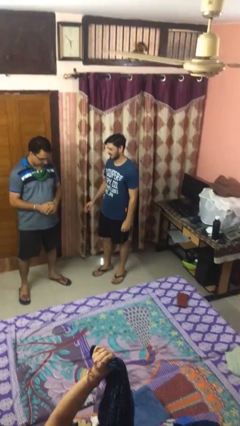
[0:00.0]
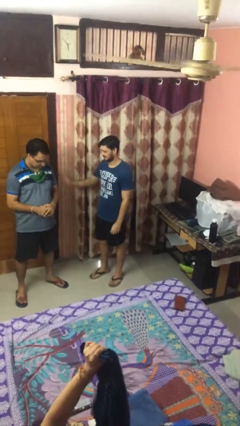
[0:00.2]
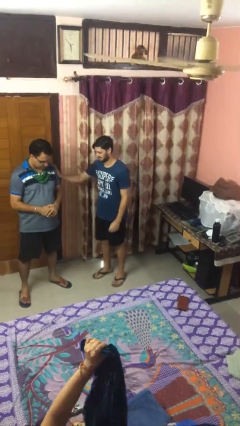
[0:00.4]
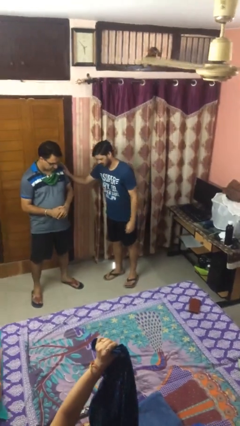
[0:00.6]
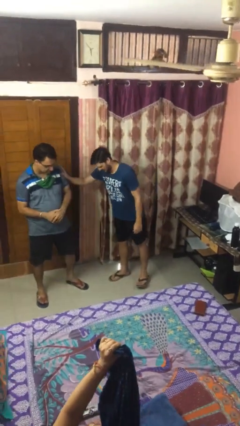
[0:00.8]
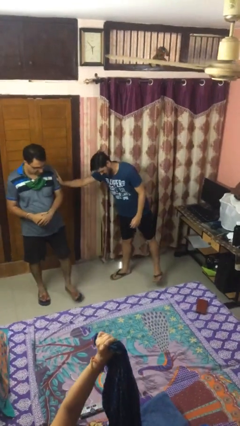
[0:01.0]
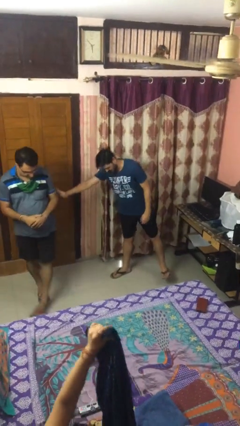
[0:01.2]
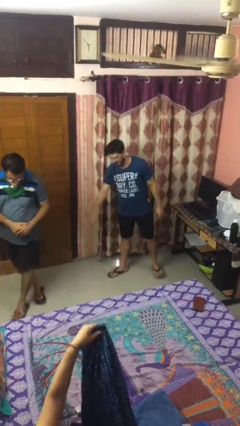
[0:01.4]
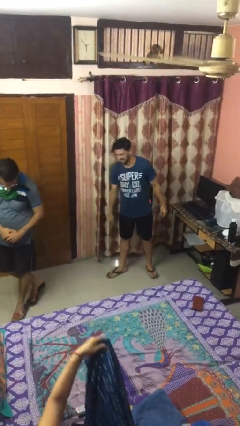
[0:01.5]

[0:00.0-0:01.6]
person shoves person

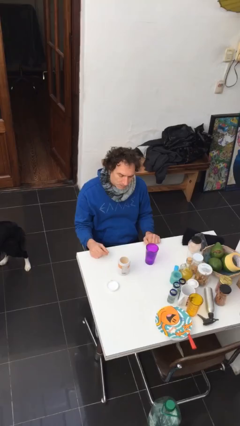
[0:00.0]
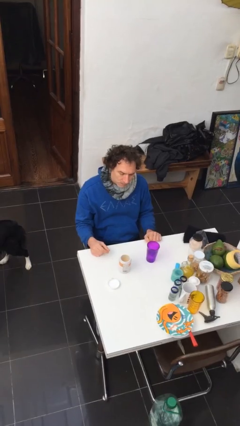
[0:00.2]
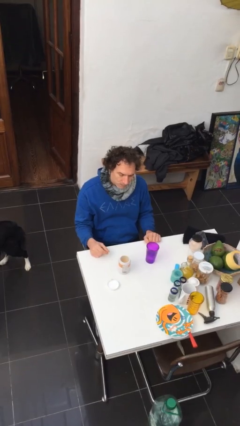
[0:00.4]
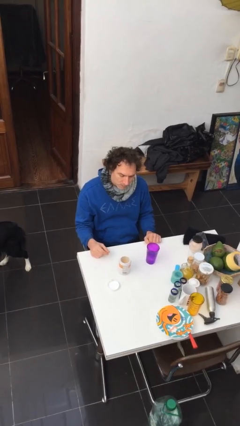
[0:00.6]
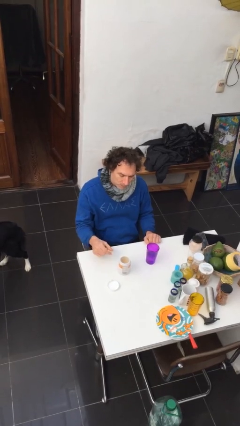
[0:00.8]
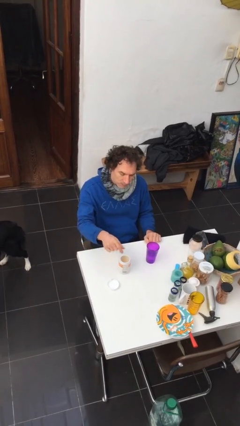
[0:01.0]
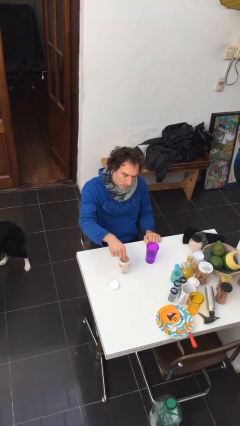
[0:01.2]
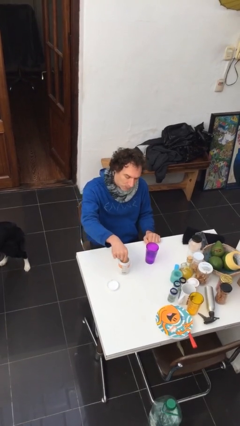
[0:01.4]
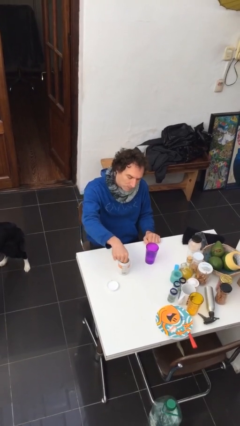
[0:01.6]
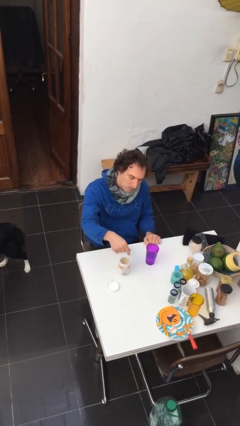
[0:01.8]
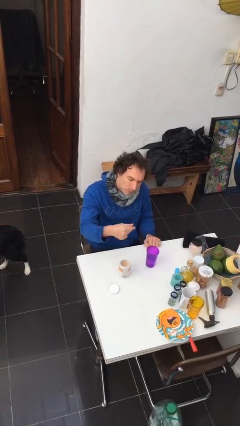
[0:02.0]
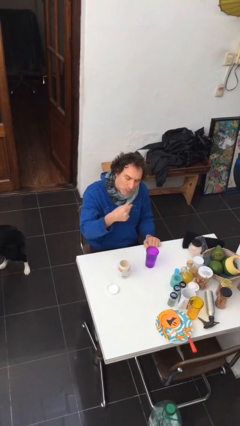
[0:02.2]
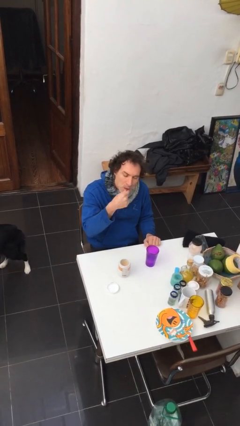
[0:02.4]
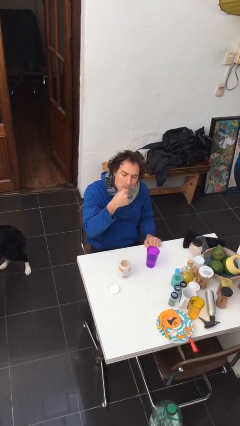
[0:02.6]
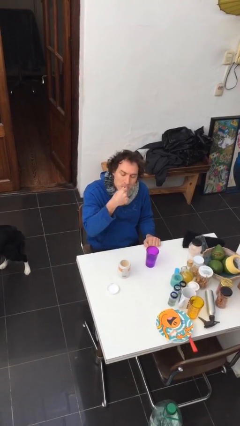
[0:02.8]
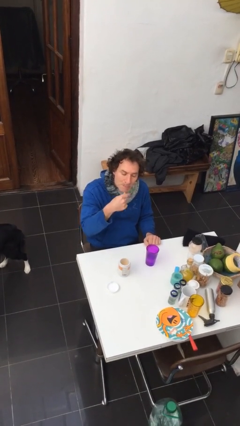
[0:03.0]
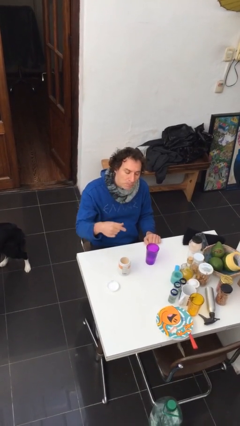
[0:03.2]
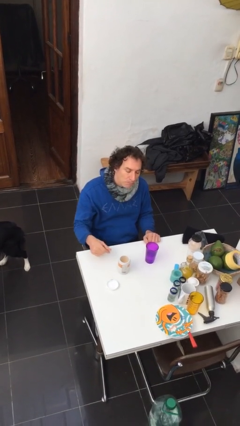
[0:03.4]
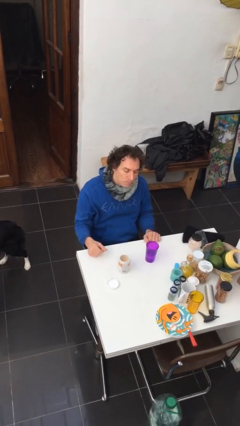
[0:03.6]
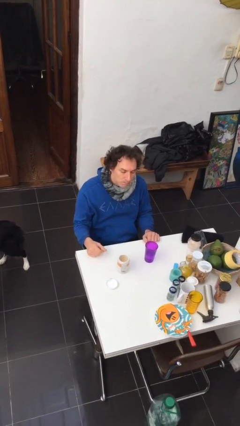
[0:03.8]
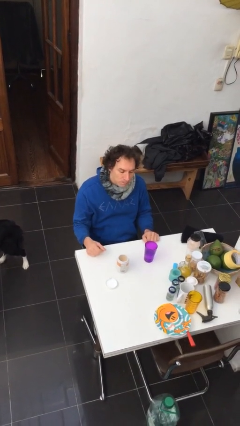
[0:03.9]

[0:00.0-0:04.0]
person takes medicine pills

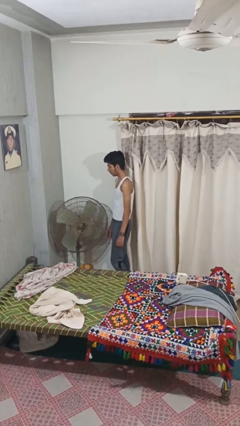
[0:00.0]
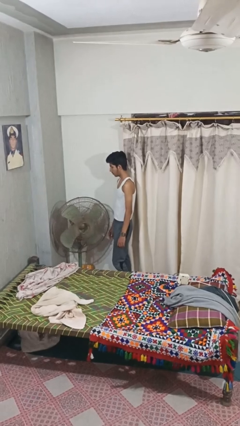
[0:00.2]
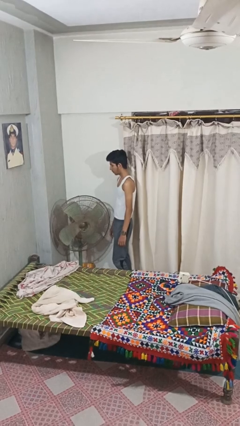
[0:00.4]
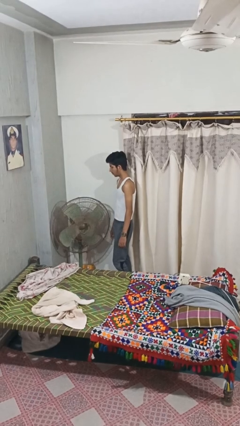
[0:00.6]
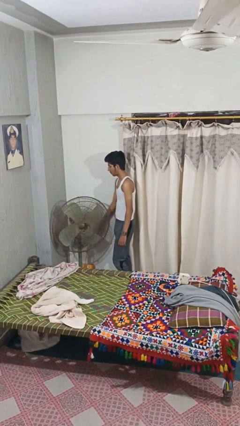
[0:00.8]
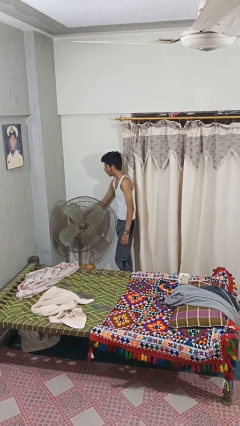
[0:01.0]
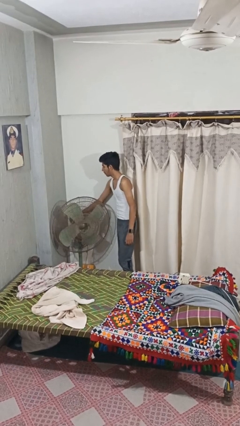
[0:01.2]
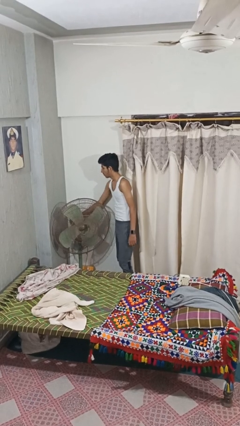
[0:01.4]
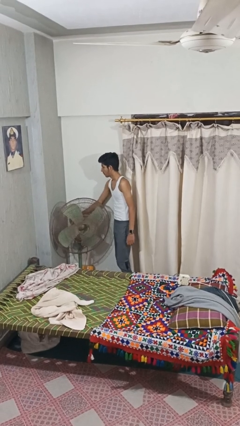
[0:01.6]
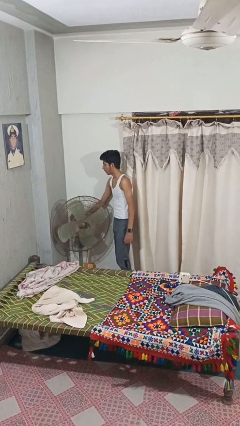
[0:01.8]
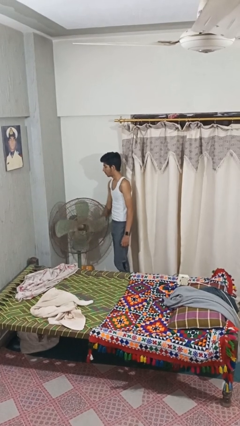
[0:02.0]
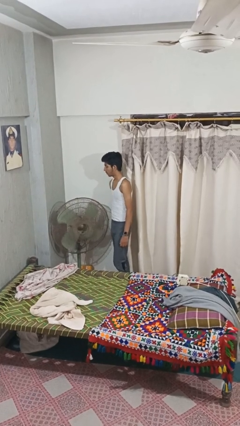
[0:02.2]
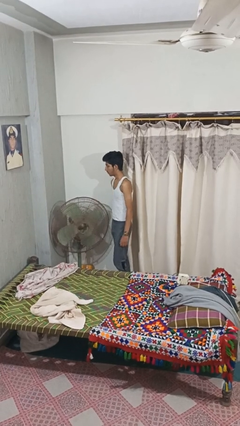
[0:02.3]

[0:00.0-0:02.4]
person turns on fan

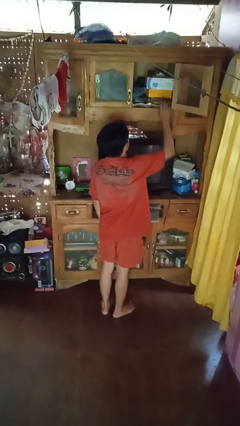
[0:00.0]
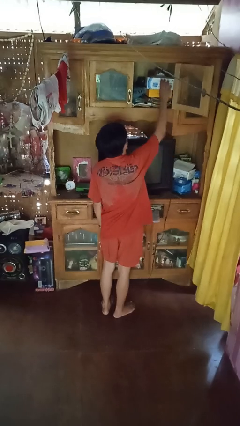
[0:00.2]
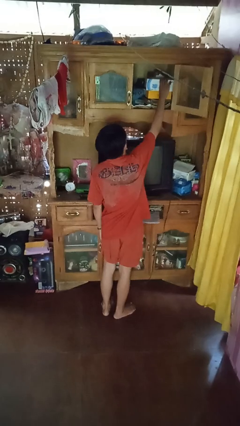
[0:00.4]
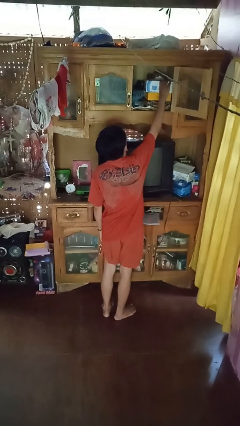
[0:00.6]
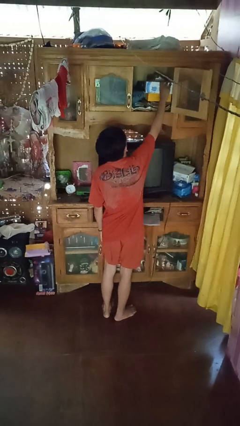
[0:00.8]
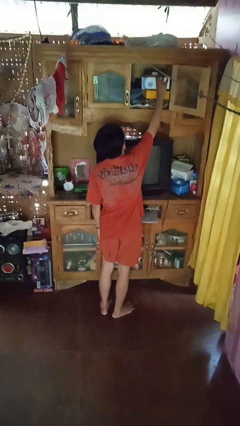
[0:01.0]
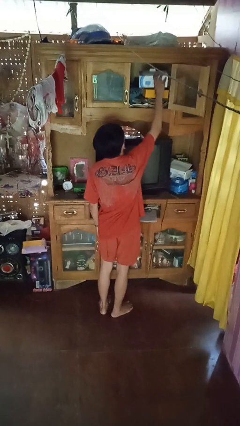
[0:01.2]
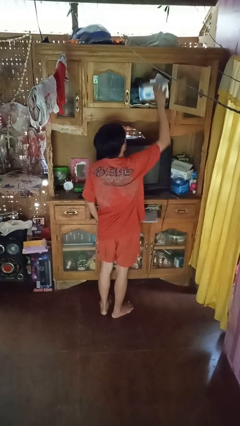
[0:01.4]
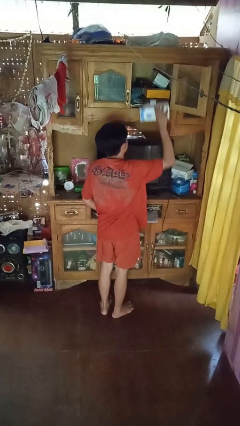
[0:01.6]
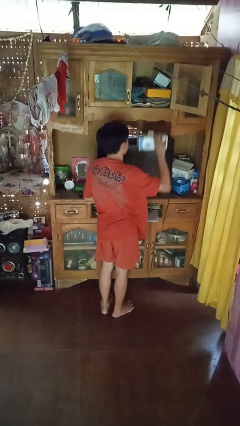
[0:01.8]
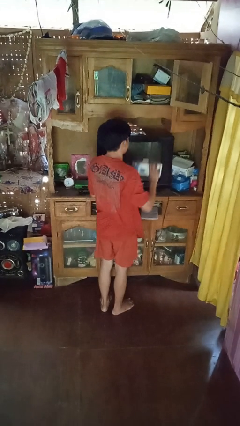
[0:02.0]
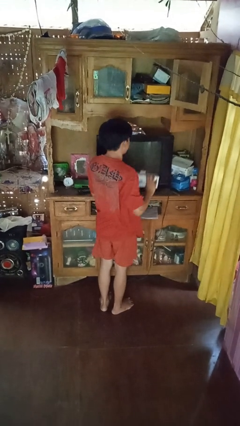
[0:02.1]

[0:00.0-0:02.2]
person picks up object from shelf

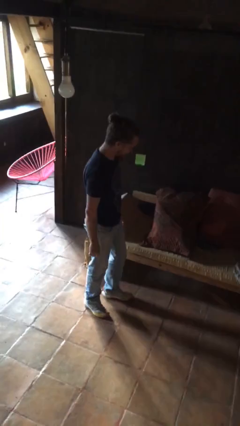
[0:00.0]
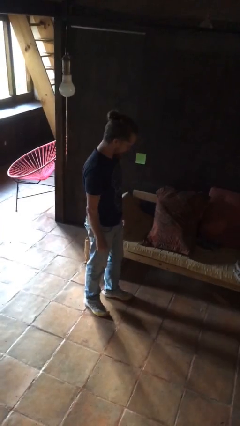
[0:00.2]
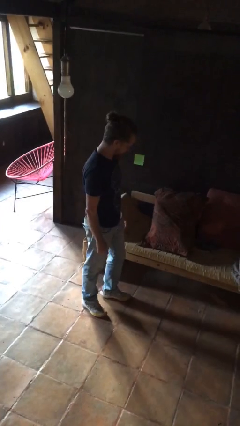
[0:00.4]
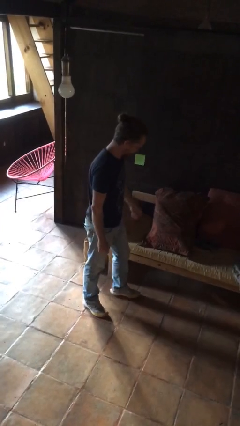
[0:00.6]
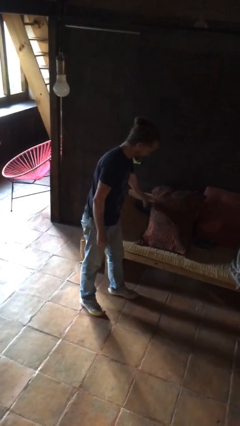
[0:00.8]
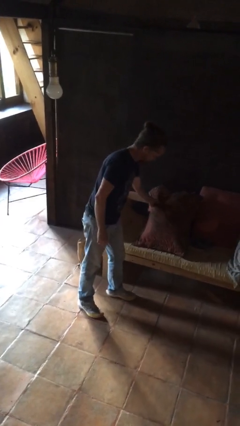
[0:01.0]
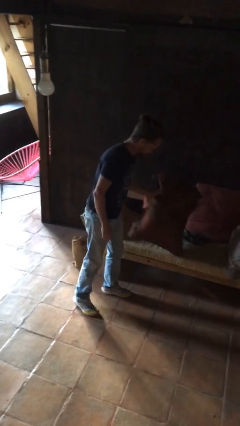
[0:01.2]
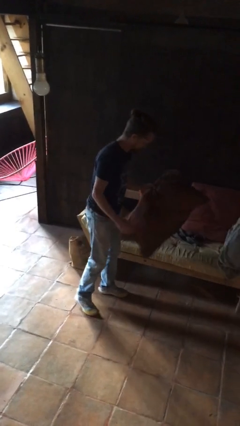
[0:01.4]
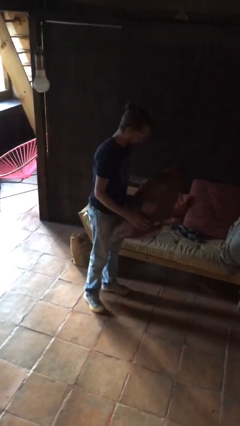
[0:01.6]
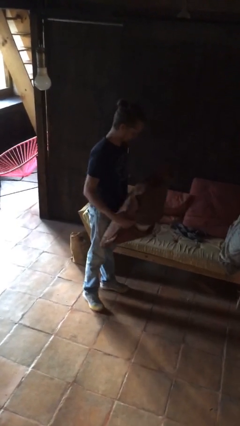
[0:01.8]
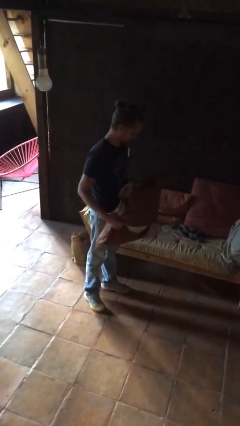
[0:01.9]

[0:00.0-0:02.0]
person picks up object from couch

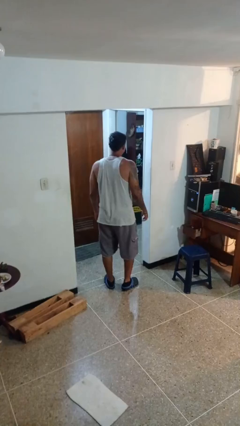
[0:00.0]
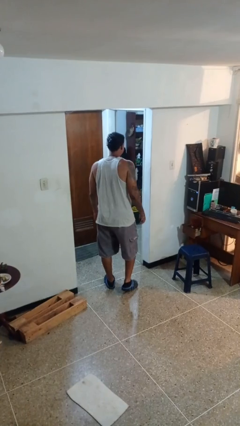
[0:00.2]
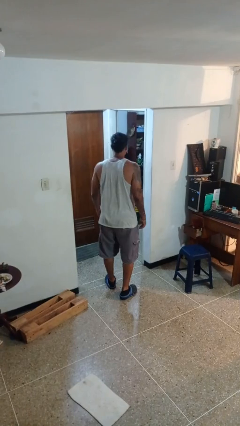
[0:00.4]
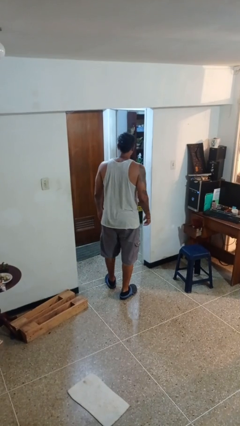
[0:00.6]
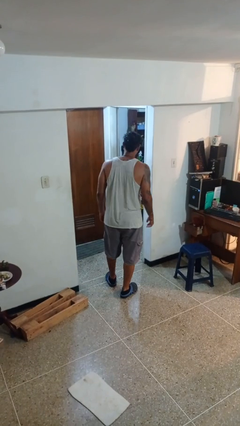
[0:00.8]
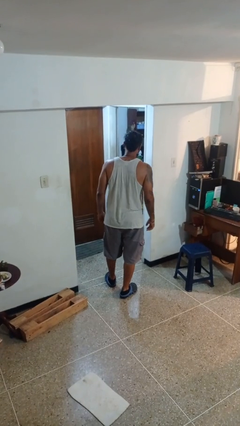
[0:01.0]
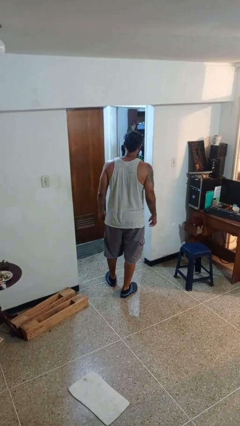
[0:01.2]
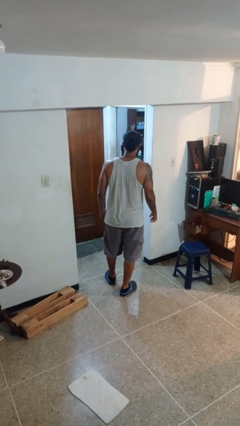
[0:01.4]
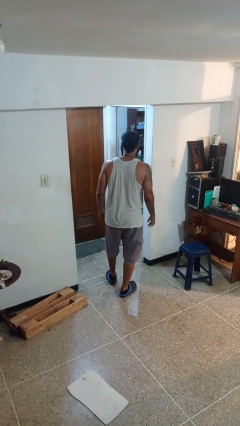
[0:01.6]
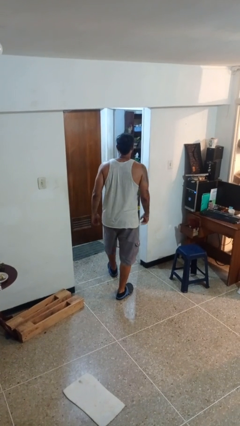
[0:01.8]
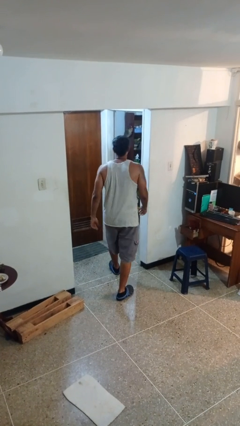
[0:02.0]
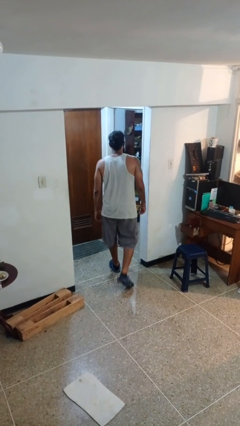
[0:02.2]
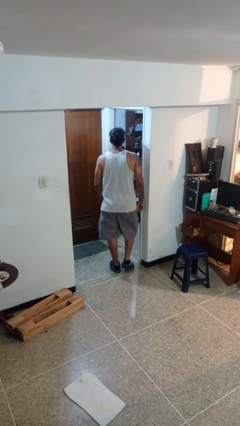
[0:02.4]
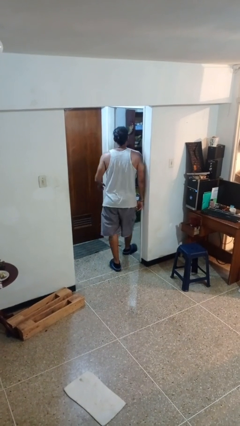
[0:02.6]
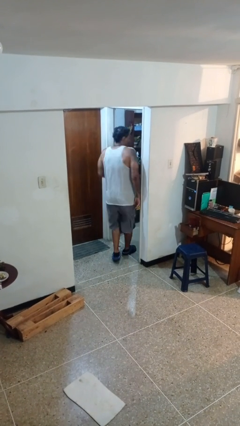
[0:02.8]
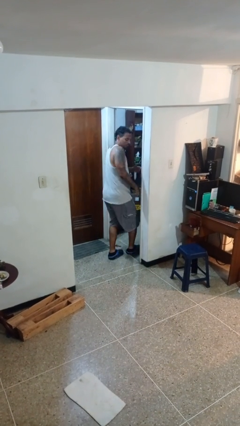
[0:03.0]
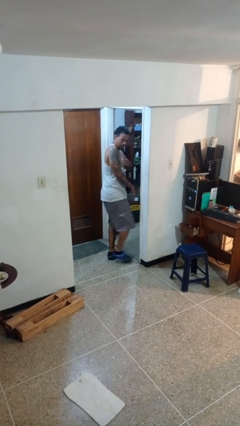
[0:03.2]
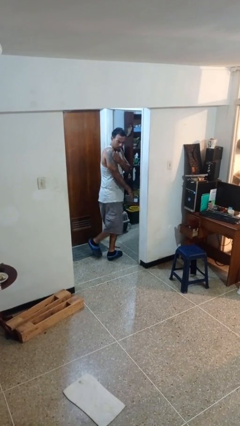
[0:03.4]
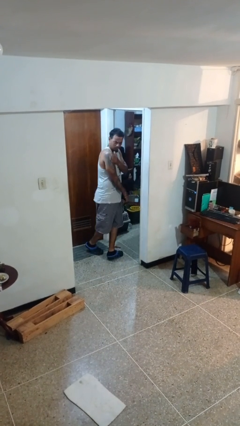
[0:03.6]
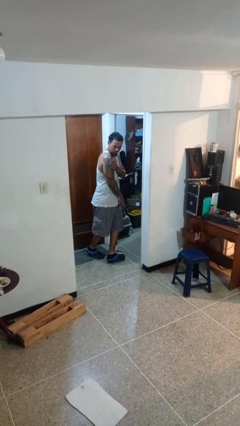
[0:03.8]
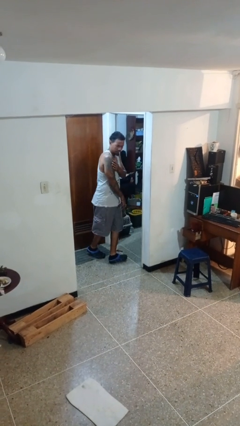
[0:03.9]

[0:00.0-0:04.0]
person bumps into wall

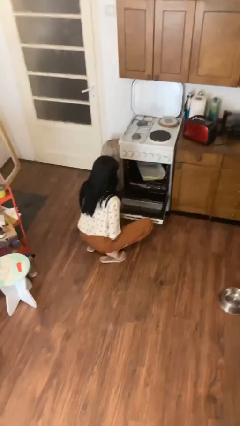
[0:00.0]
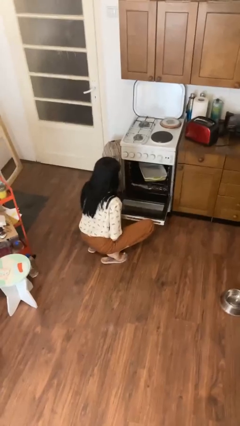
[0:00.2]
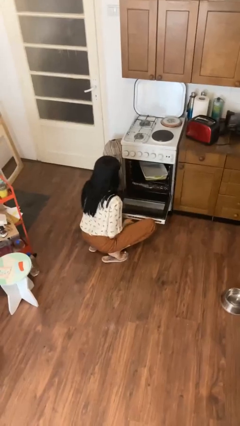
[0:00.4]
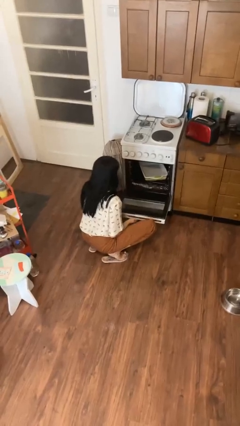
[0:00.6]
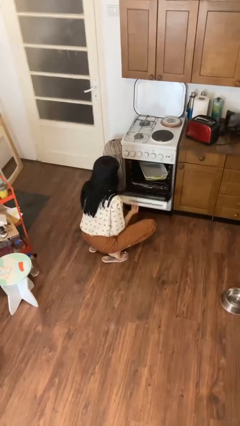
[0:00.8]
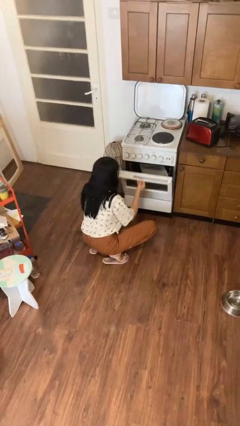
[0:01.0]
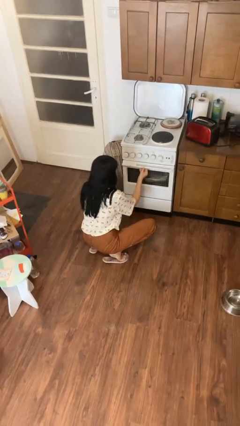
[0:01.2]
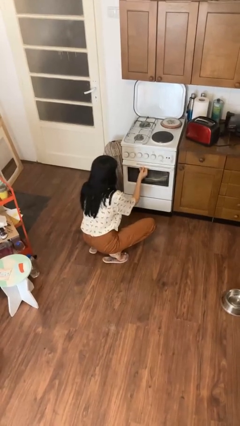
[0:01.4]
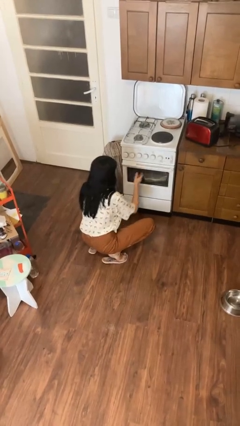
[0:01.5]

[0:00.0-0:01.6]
person closes oven door
